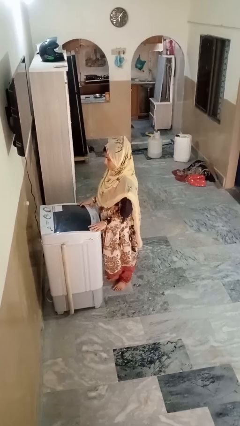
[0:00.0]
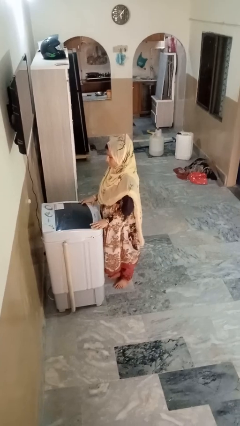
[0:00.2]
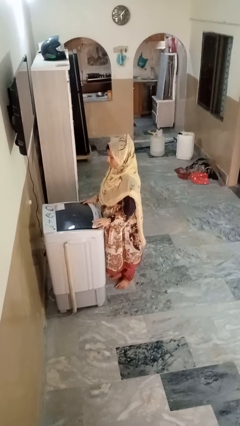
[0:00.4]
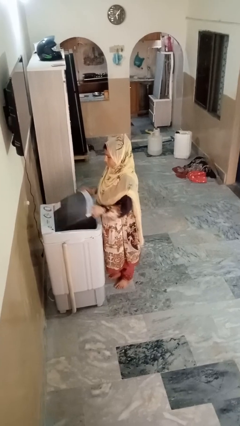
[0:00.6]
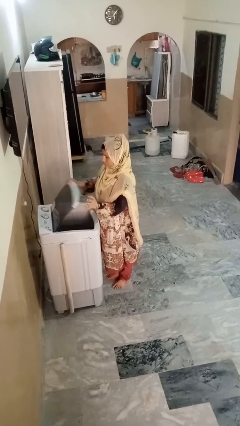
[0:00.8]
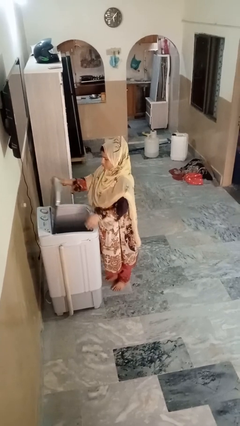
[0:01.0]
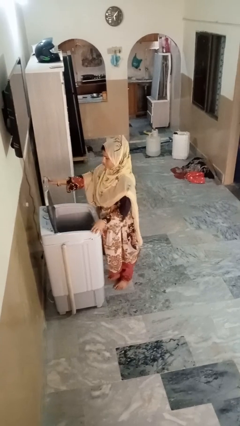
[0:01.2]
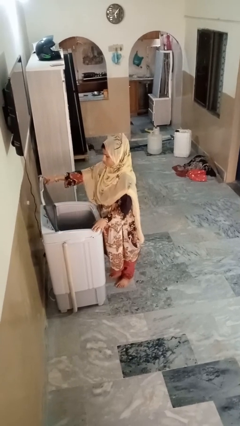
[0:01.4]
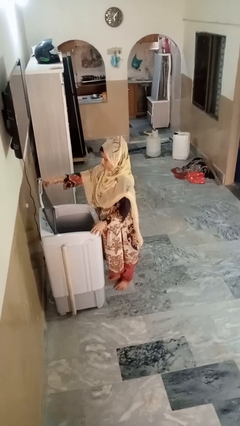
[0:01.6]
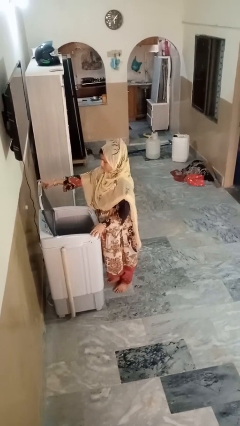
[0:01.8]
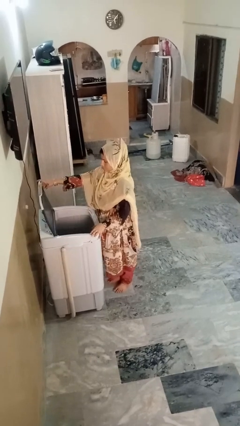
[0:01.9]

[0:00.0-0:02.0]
person opens clothes washer

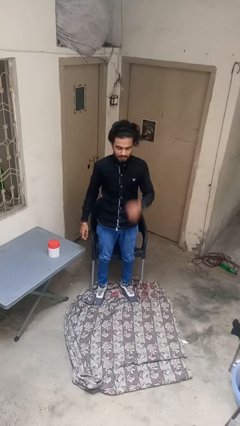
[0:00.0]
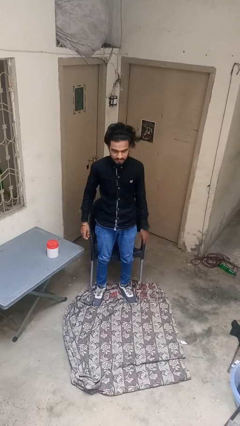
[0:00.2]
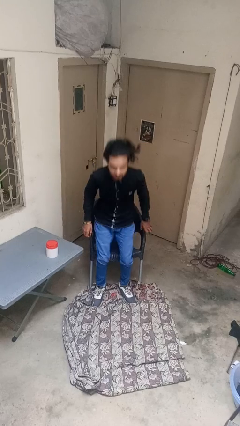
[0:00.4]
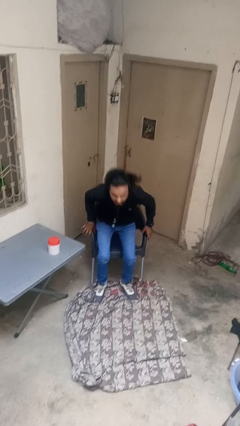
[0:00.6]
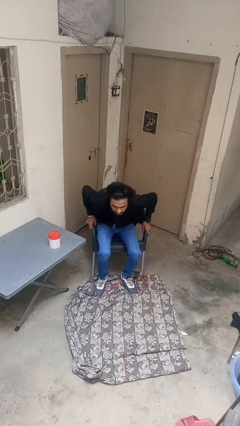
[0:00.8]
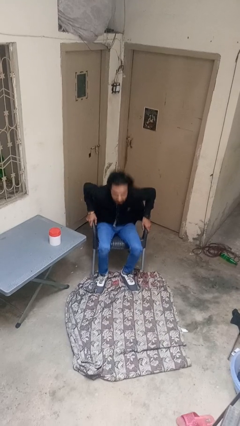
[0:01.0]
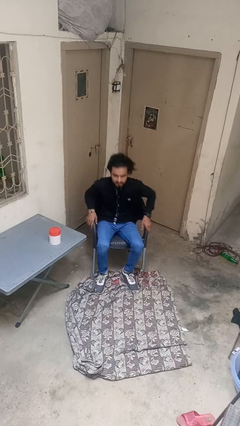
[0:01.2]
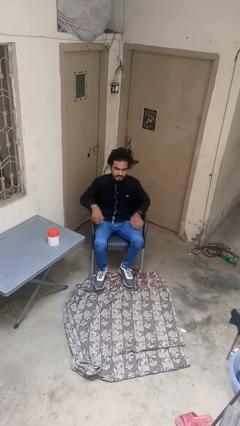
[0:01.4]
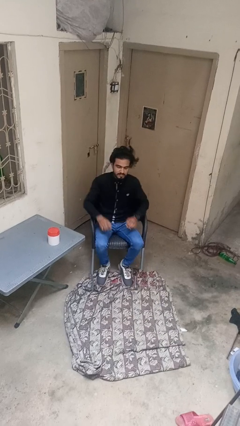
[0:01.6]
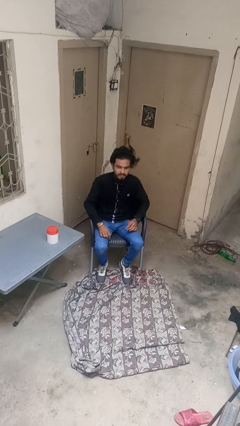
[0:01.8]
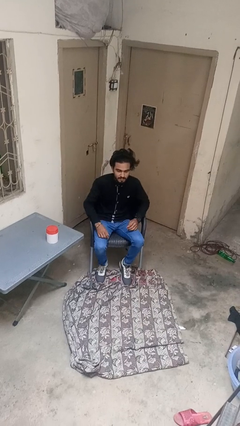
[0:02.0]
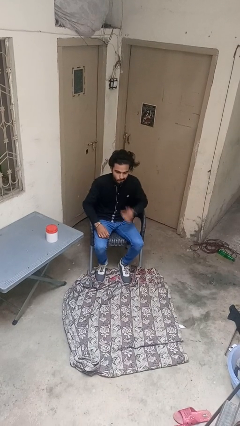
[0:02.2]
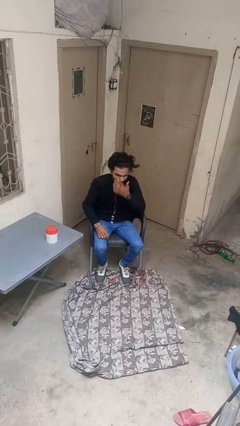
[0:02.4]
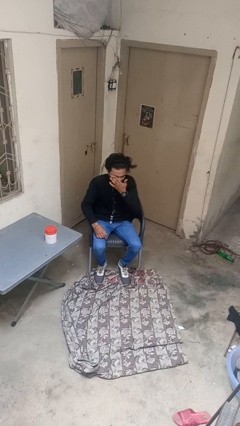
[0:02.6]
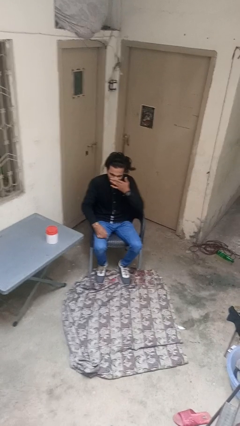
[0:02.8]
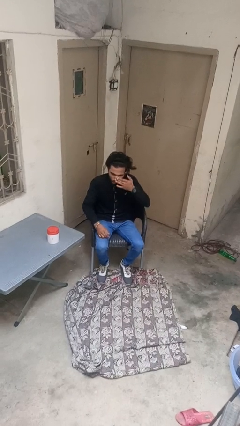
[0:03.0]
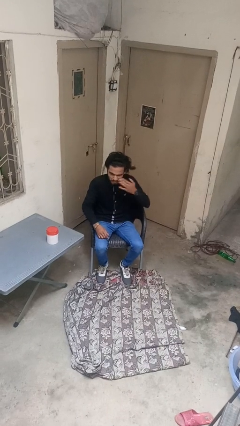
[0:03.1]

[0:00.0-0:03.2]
person sits down

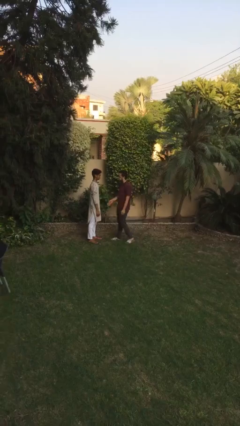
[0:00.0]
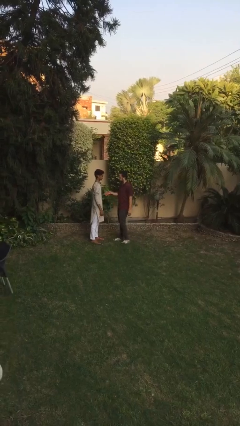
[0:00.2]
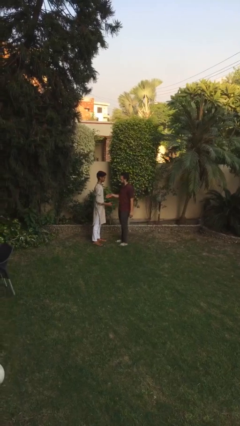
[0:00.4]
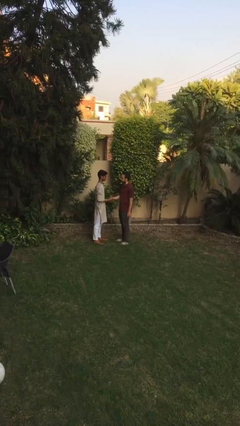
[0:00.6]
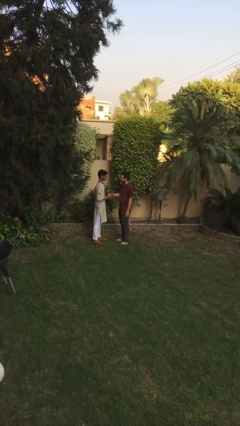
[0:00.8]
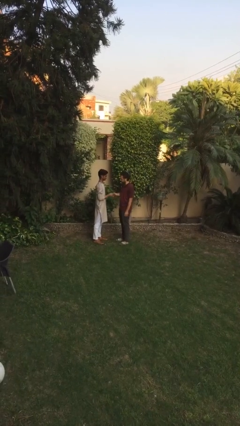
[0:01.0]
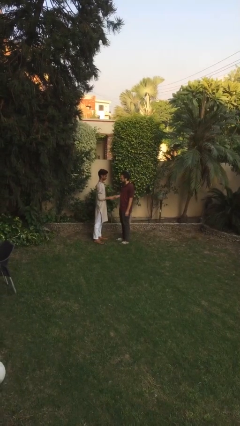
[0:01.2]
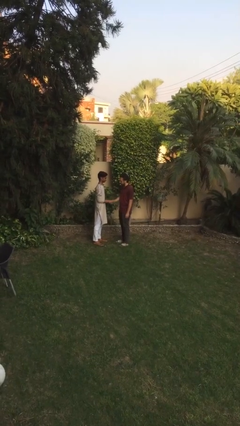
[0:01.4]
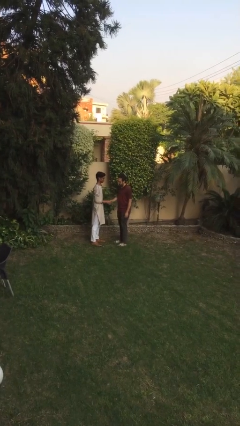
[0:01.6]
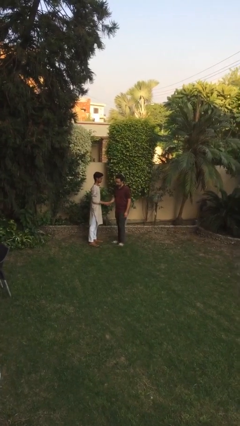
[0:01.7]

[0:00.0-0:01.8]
person shakes hand

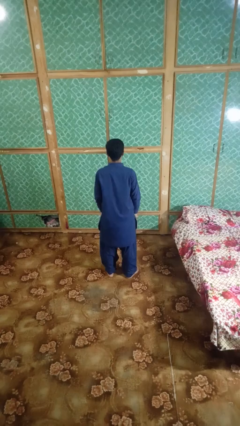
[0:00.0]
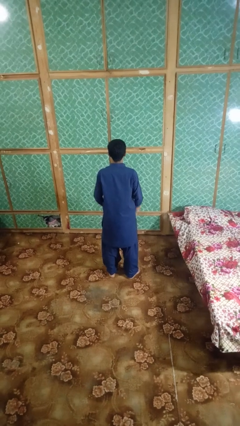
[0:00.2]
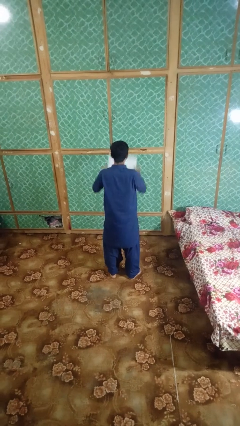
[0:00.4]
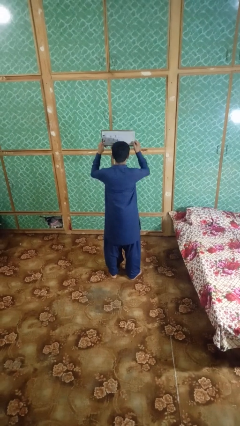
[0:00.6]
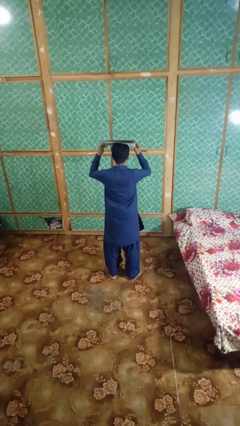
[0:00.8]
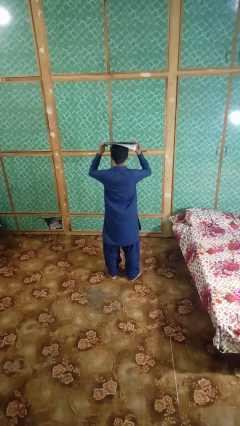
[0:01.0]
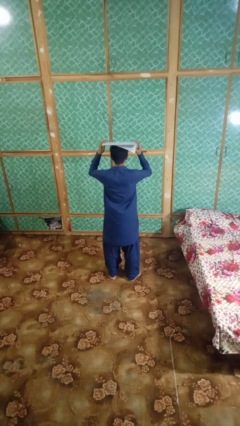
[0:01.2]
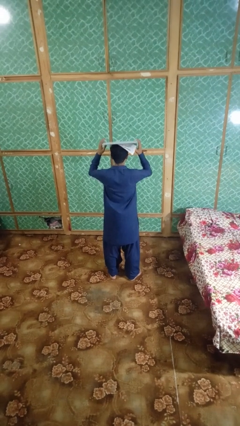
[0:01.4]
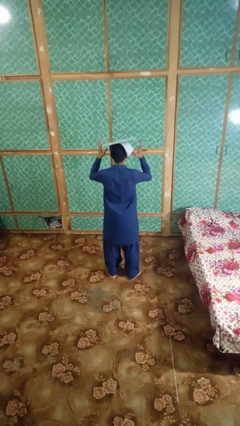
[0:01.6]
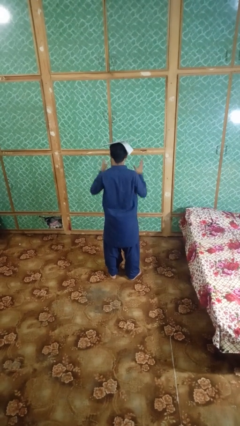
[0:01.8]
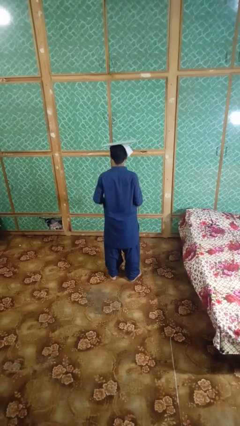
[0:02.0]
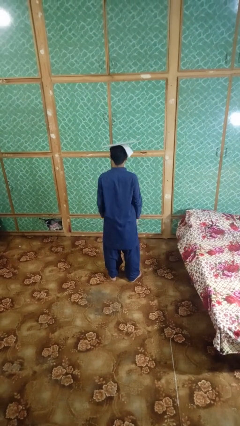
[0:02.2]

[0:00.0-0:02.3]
person holds object above head

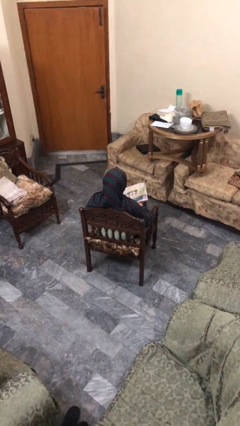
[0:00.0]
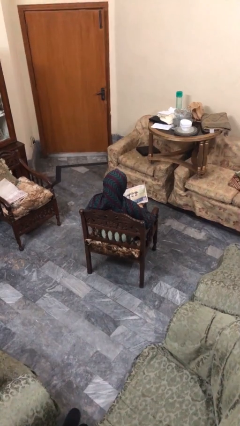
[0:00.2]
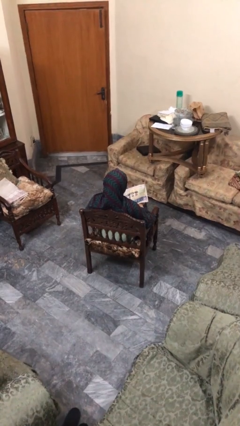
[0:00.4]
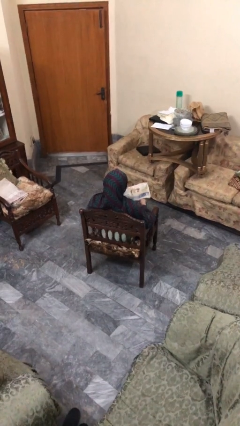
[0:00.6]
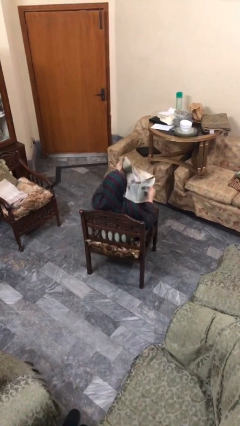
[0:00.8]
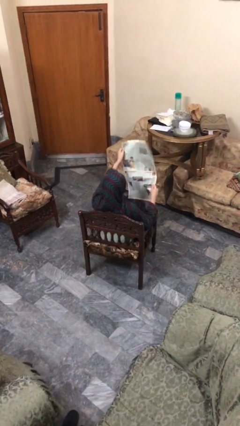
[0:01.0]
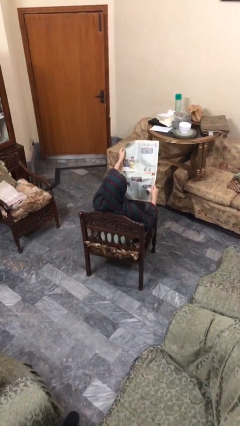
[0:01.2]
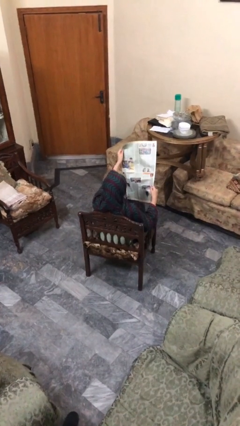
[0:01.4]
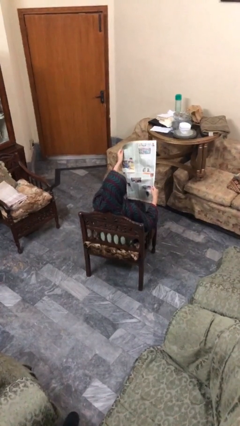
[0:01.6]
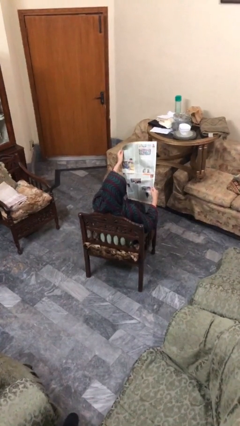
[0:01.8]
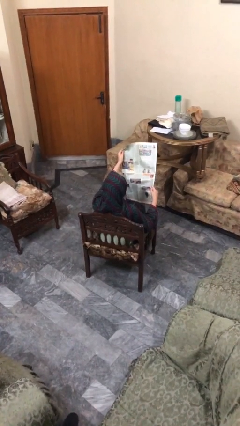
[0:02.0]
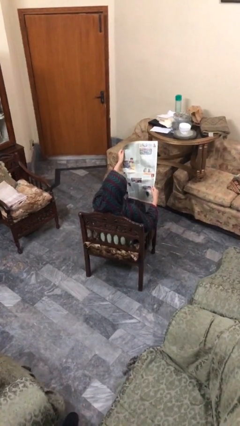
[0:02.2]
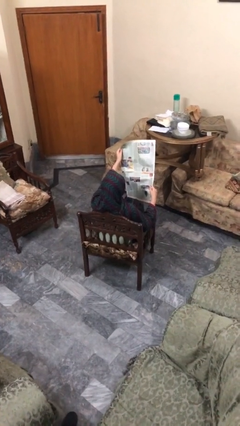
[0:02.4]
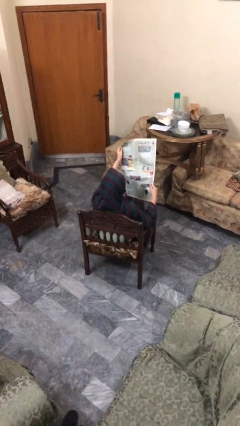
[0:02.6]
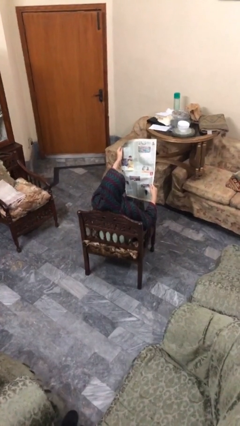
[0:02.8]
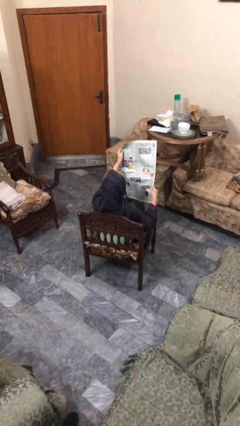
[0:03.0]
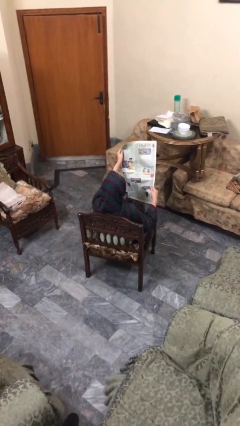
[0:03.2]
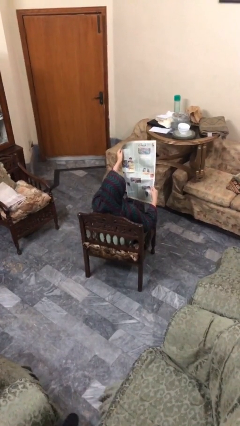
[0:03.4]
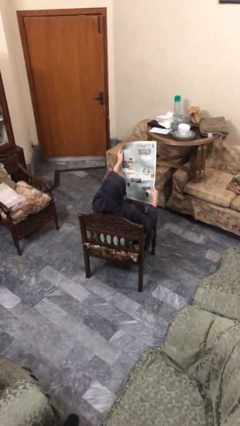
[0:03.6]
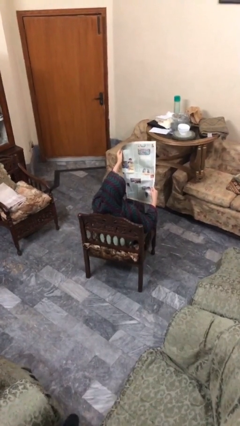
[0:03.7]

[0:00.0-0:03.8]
person reads newspaper

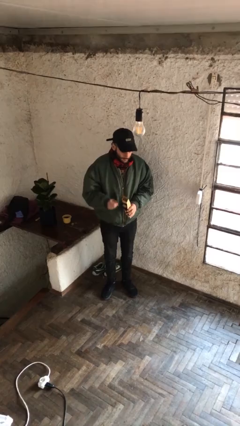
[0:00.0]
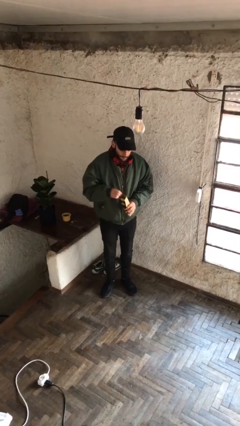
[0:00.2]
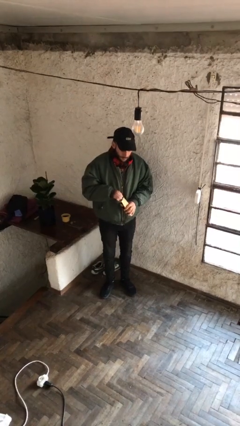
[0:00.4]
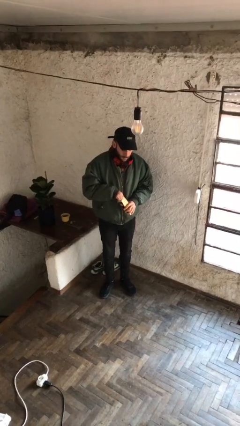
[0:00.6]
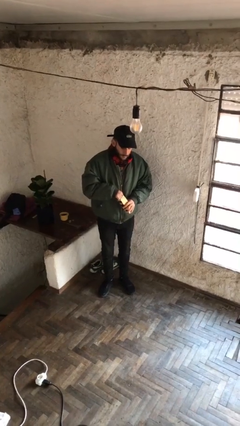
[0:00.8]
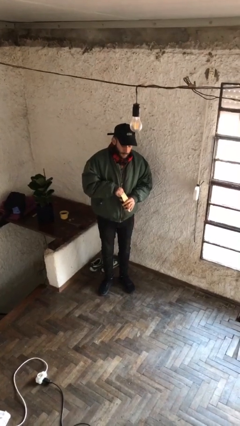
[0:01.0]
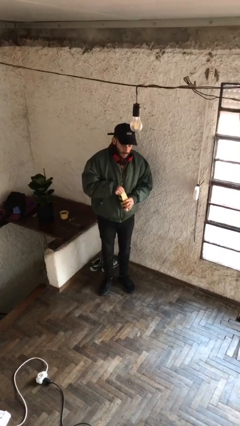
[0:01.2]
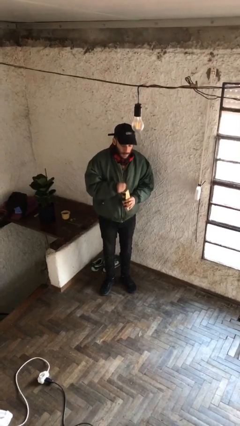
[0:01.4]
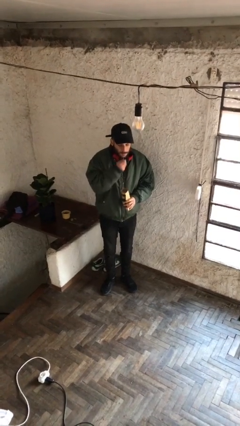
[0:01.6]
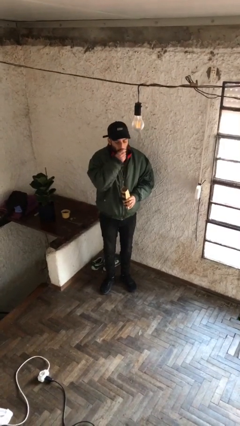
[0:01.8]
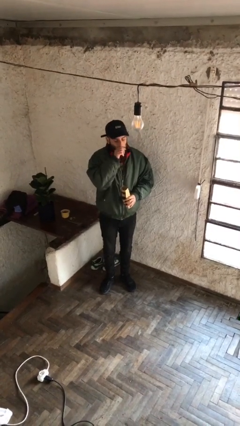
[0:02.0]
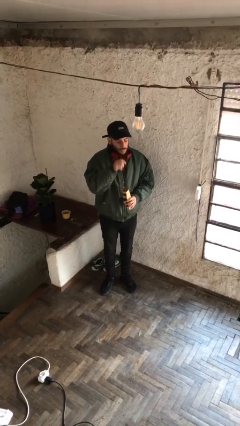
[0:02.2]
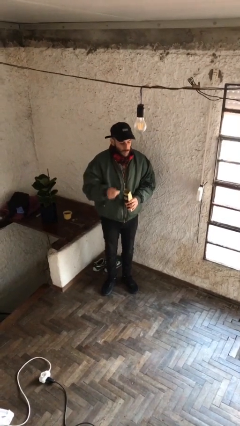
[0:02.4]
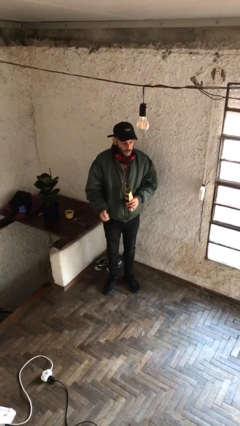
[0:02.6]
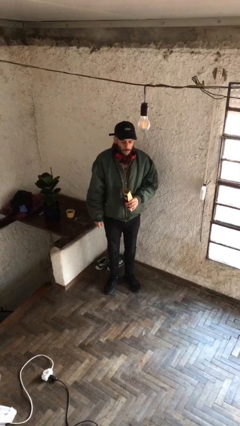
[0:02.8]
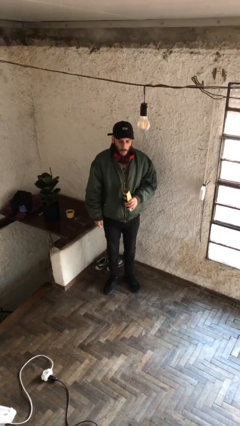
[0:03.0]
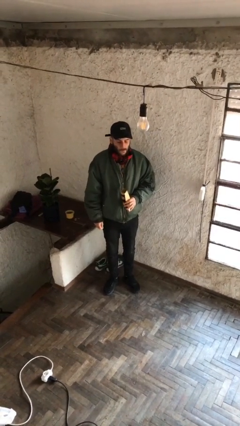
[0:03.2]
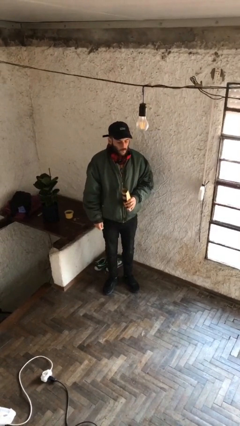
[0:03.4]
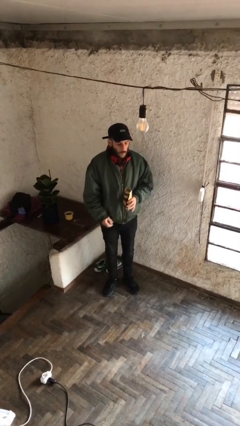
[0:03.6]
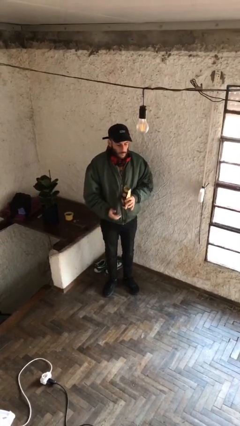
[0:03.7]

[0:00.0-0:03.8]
person eats snack from bag
